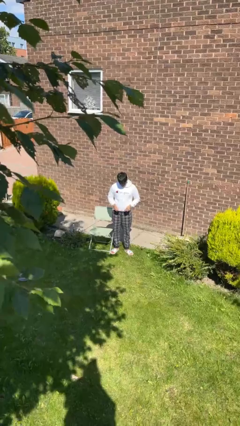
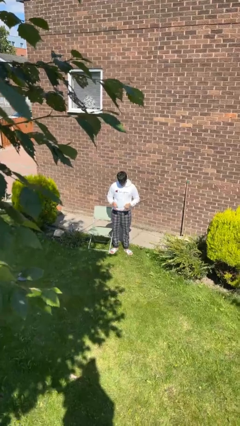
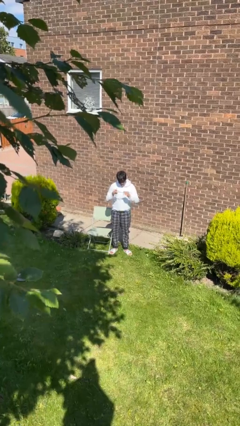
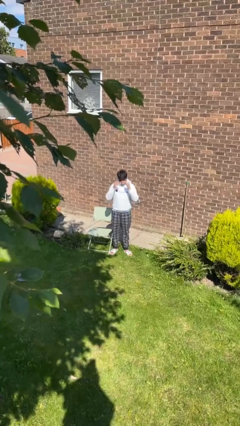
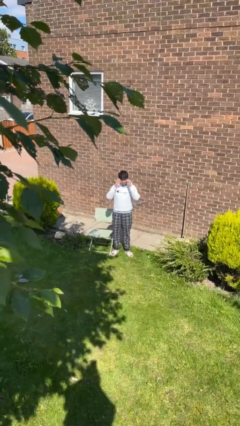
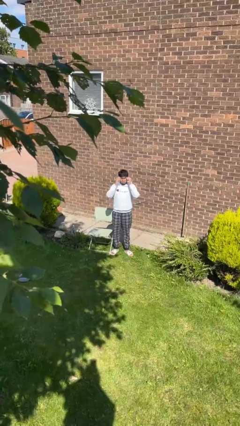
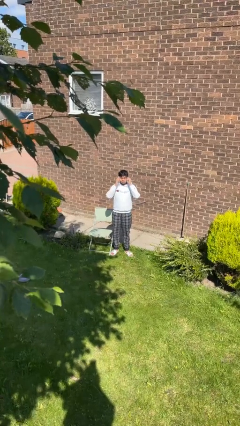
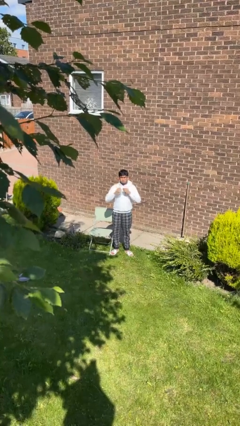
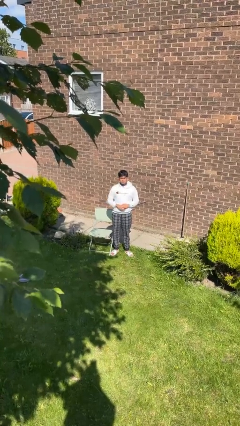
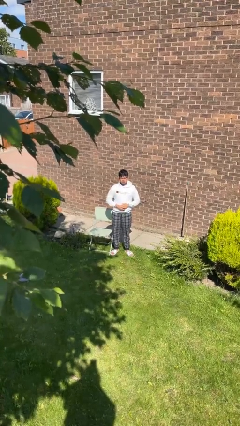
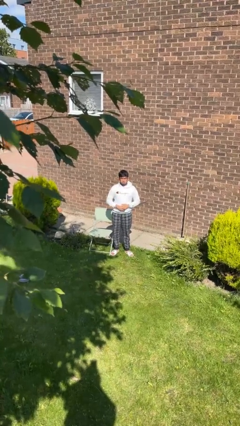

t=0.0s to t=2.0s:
person puts on glasses

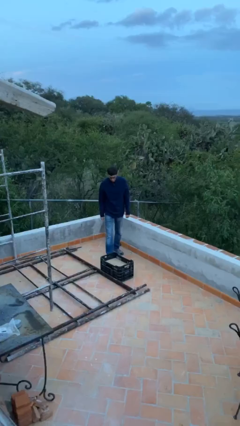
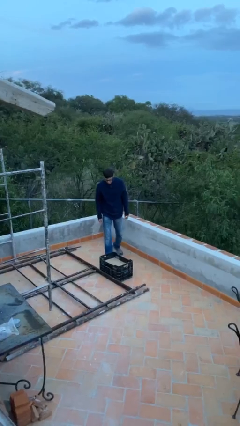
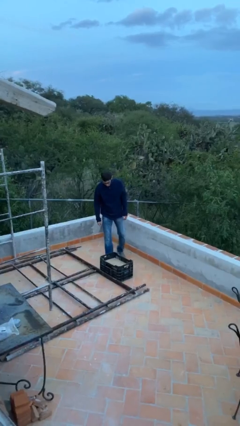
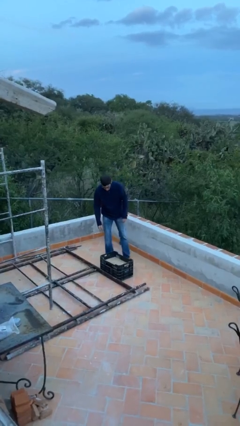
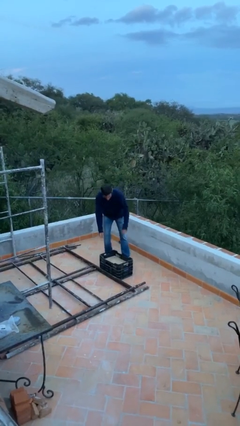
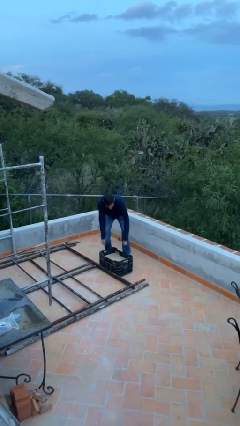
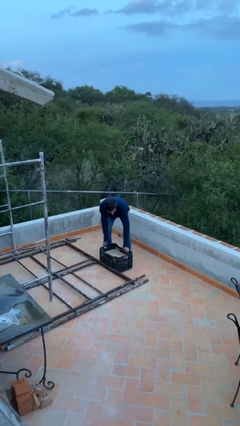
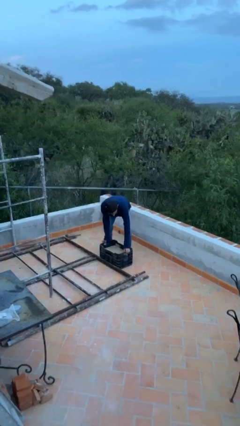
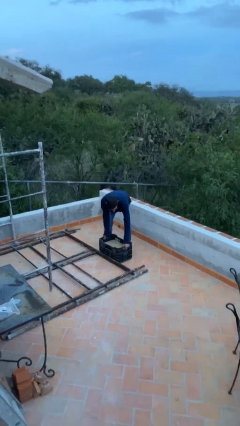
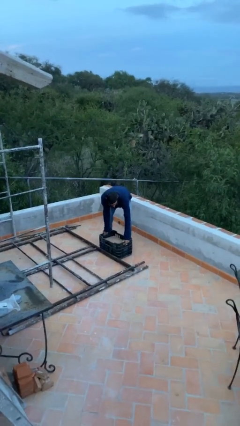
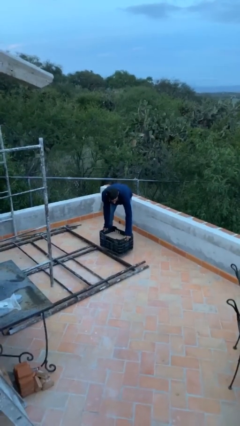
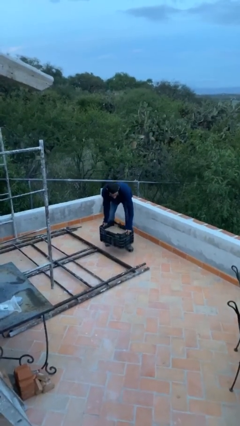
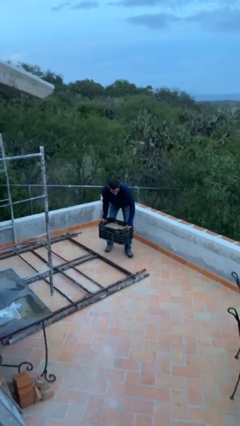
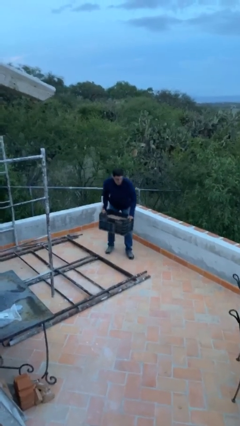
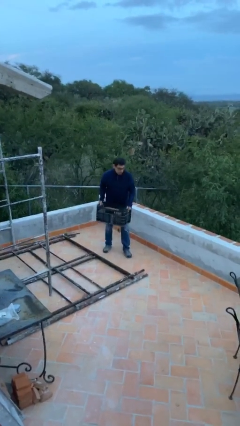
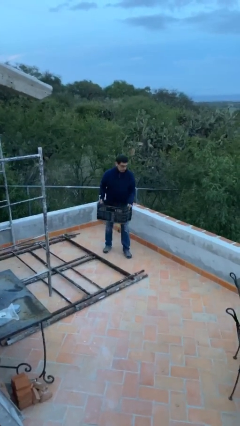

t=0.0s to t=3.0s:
person picks up object from floor

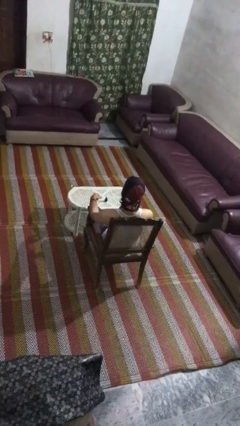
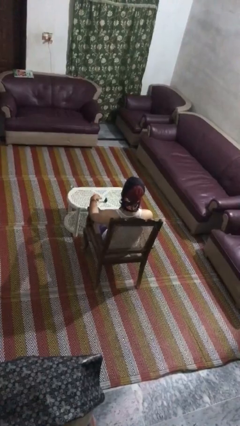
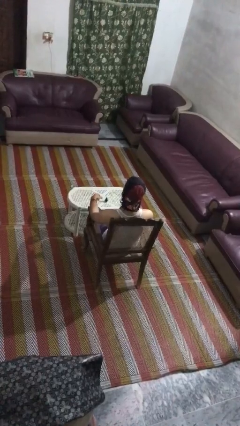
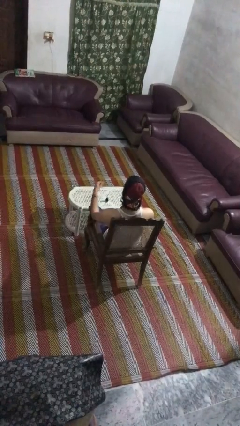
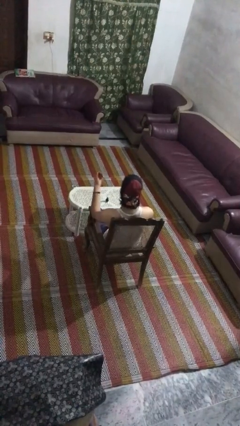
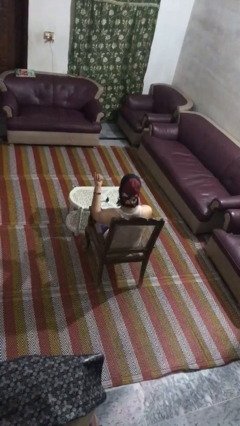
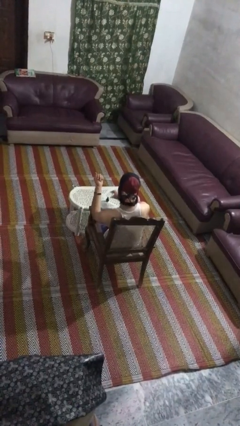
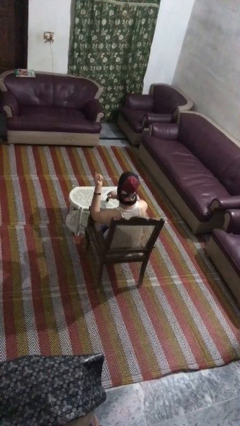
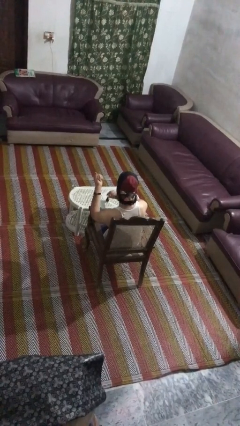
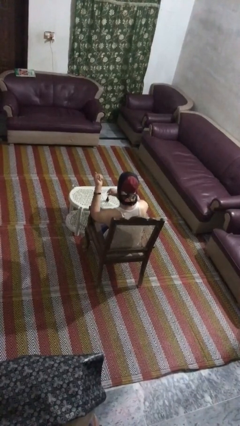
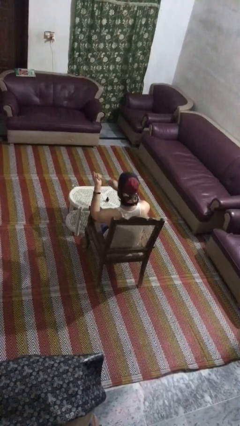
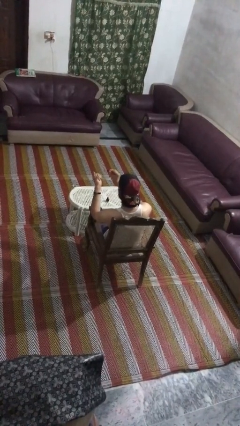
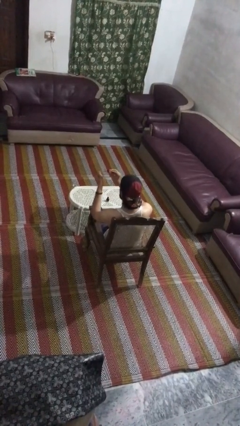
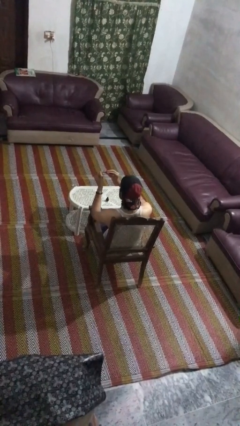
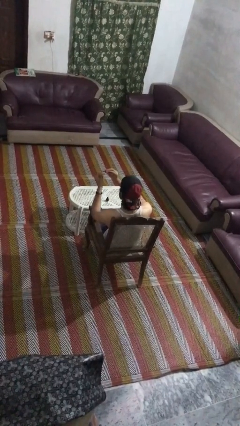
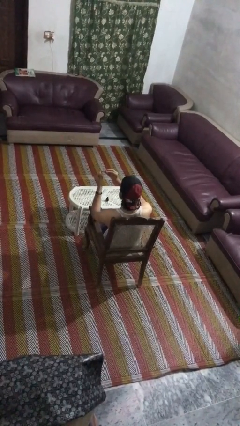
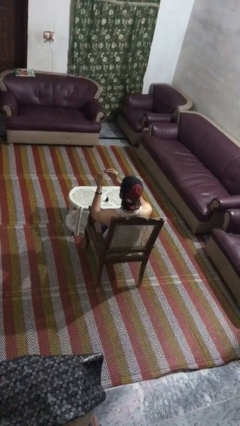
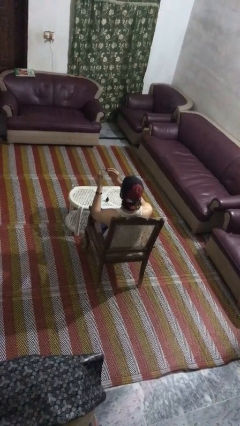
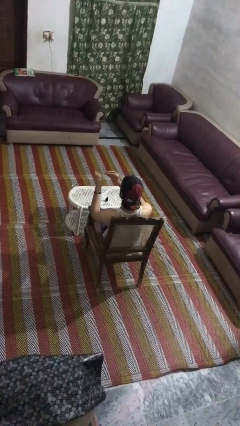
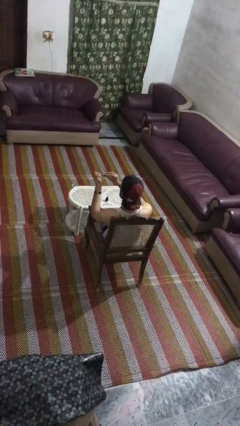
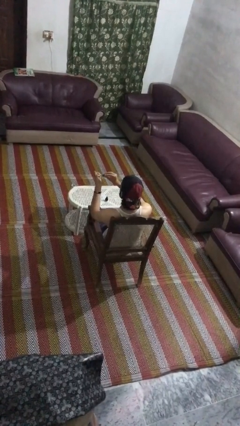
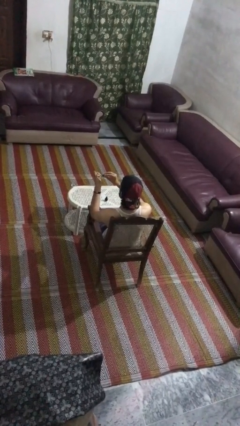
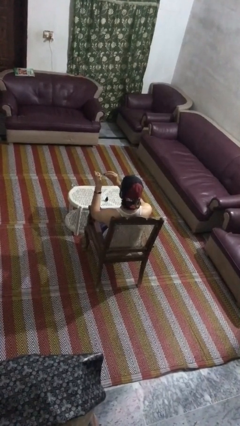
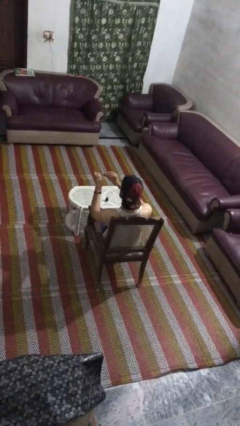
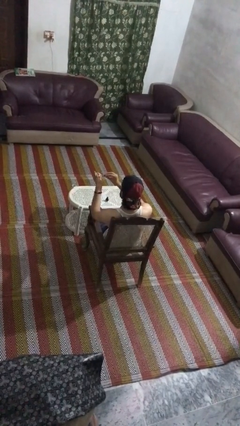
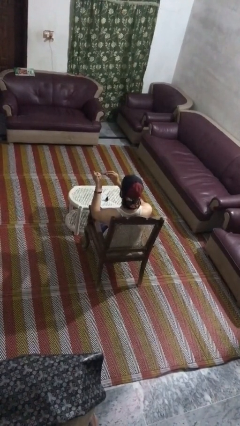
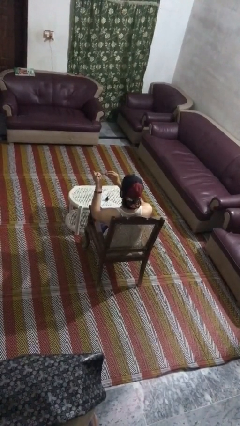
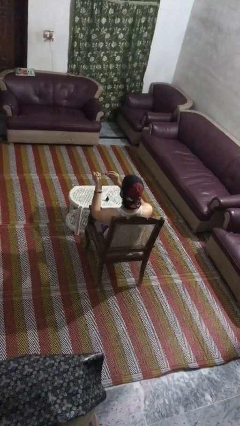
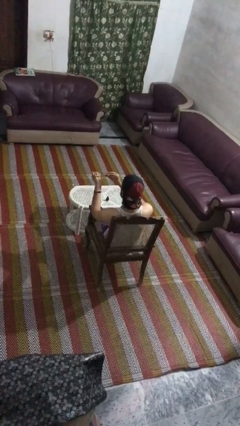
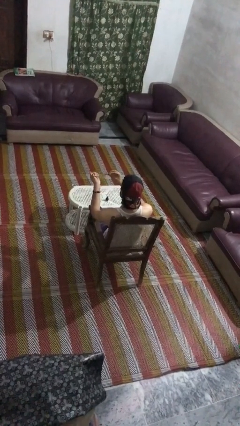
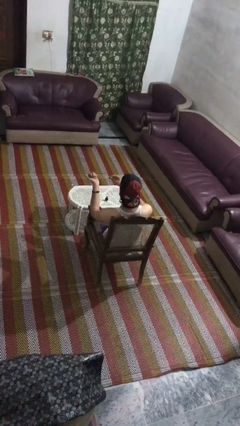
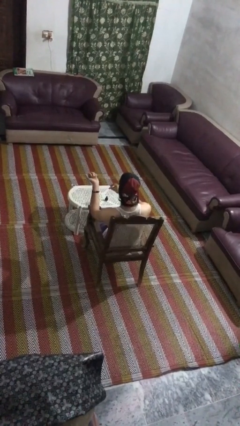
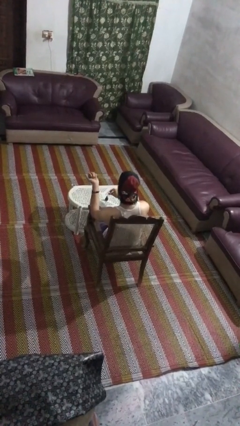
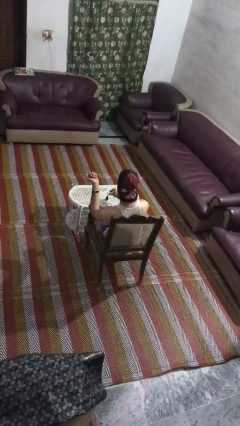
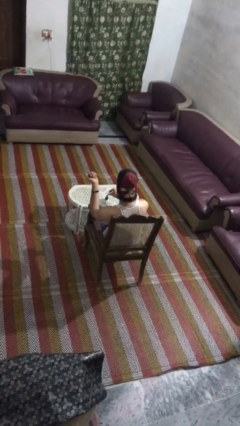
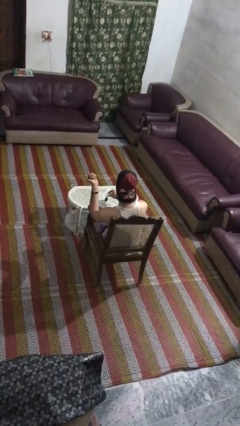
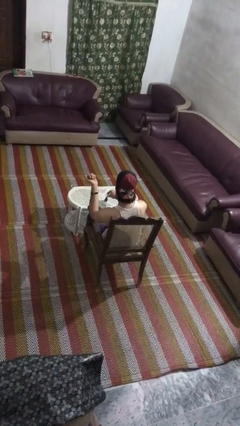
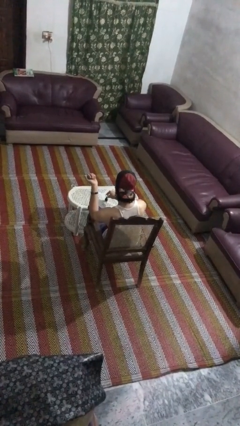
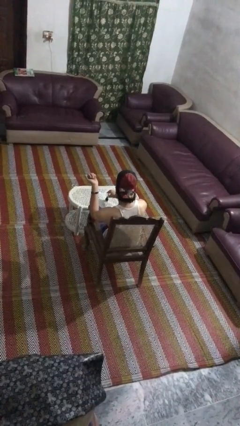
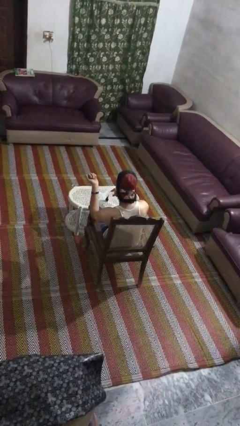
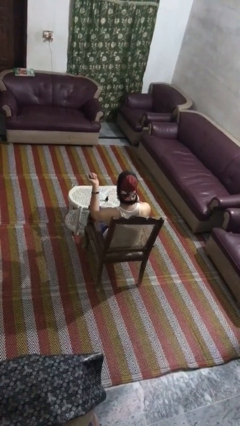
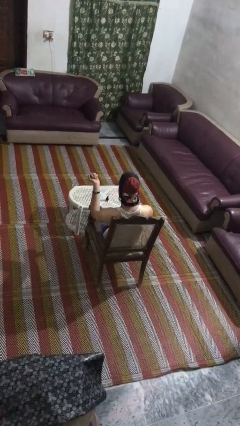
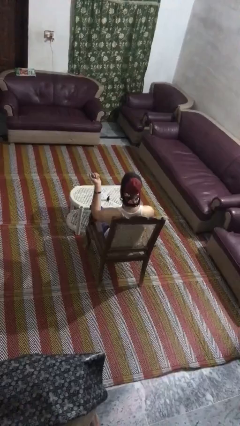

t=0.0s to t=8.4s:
person paints fingernails

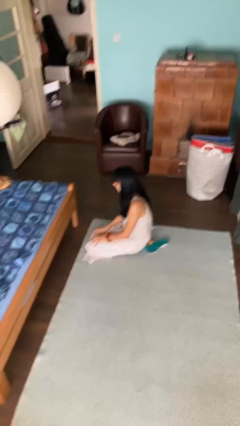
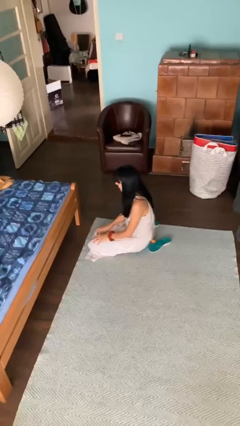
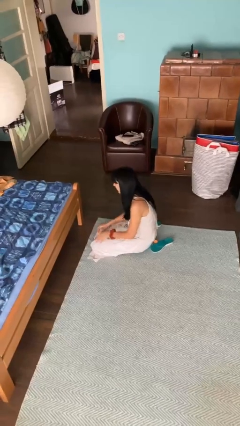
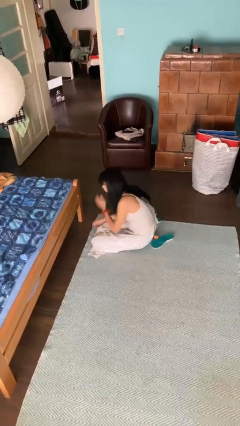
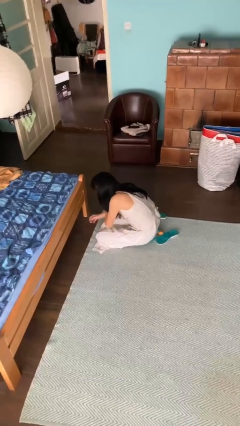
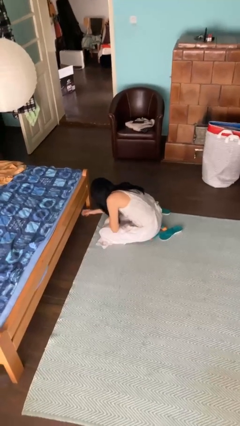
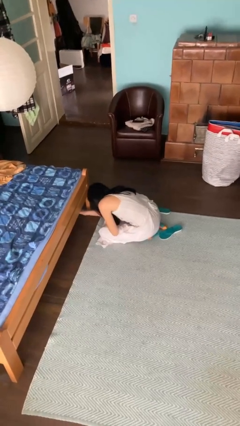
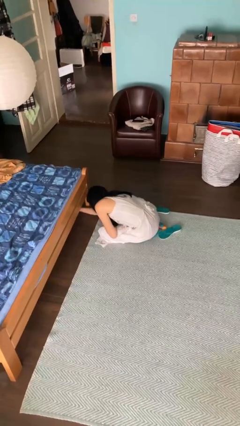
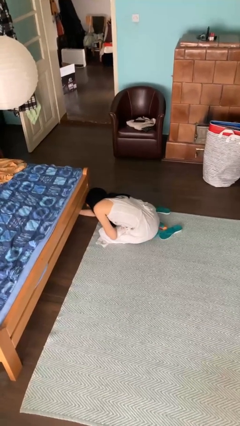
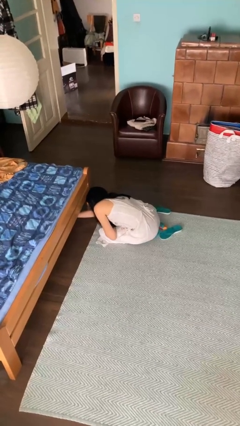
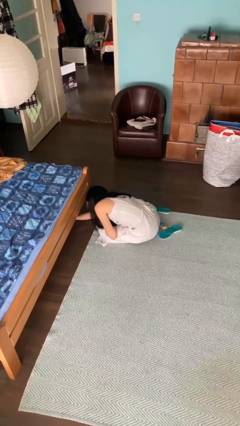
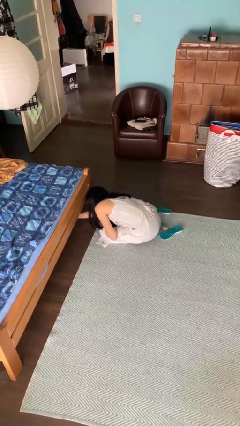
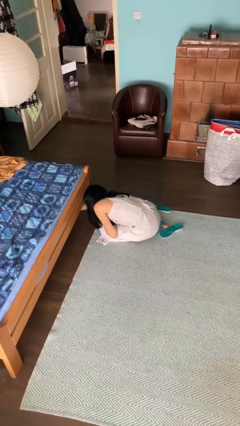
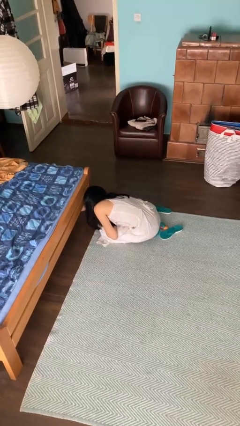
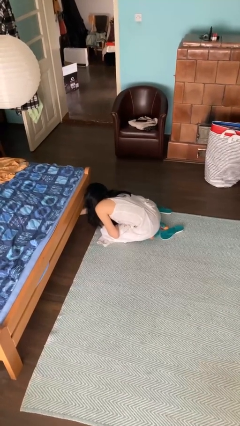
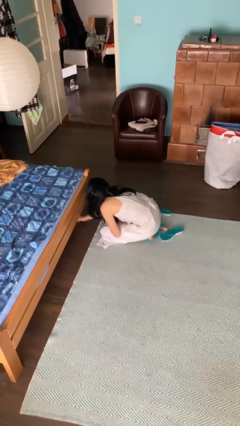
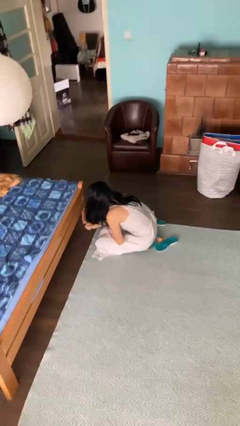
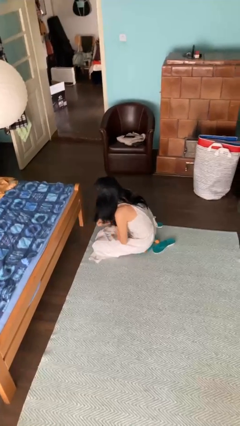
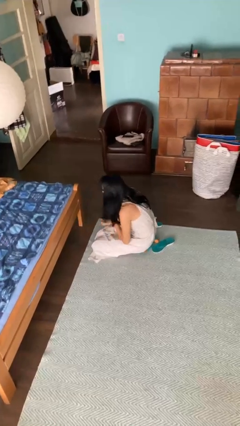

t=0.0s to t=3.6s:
person searches under bed

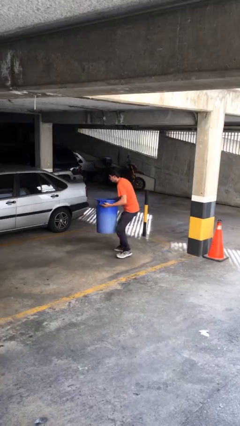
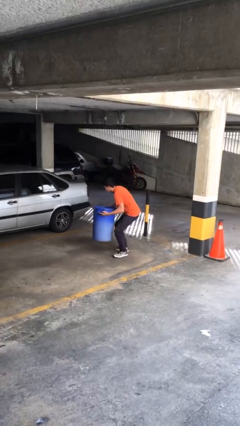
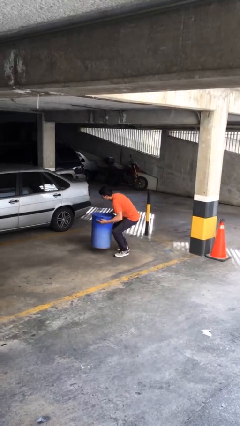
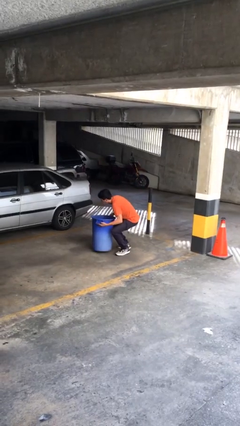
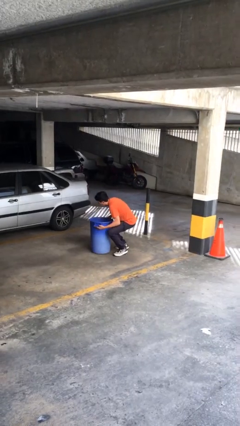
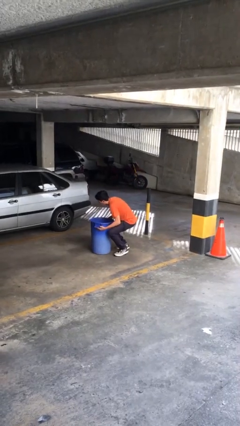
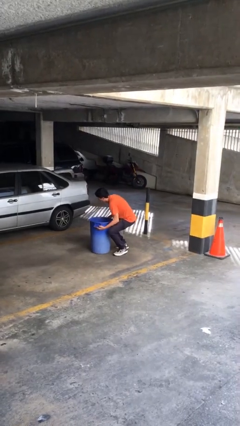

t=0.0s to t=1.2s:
person puts down object on floor
